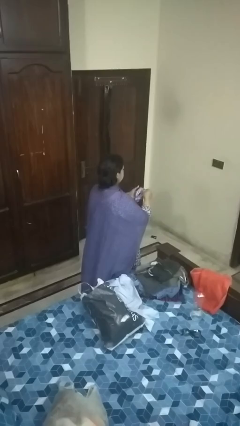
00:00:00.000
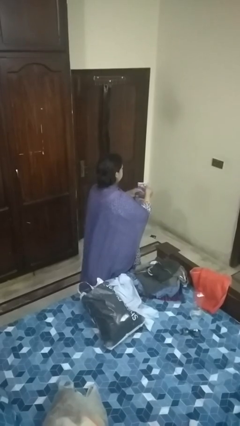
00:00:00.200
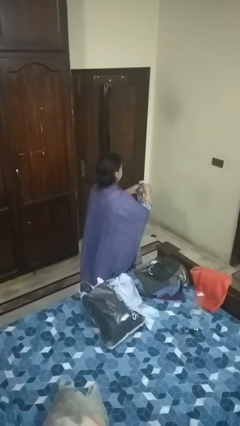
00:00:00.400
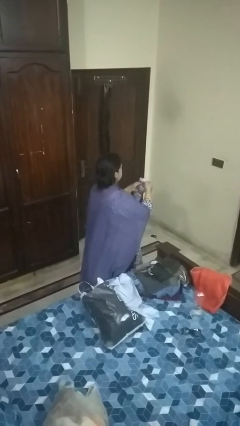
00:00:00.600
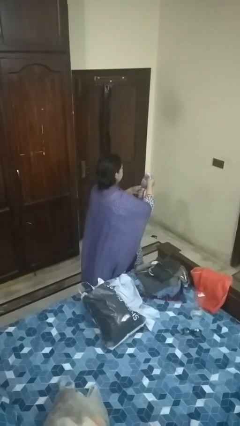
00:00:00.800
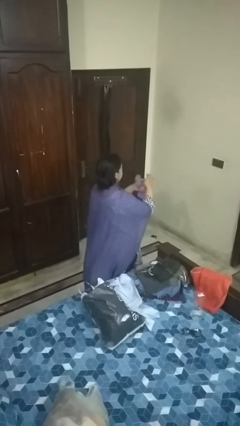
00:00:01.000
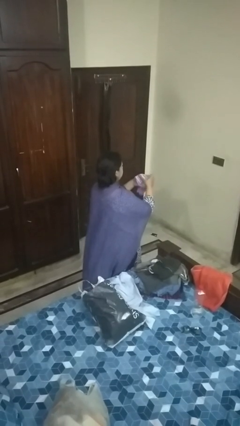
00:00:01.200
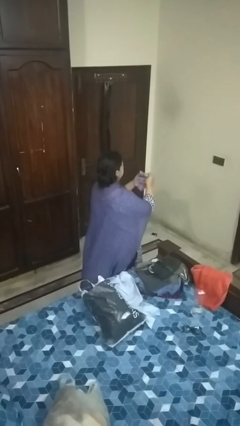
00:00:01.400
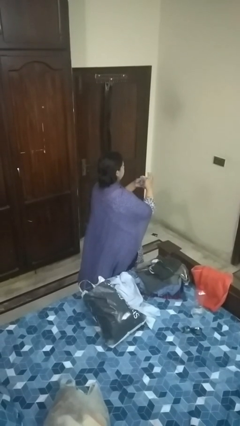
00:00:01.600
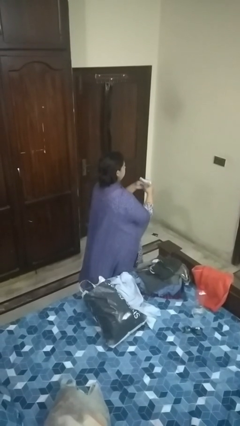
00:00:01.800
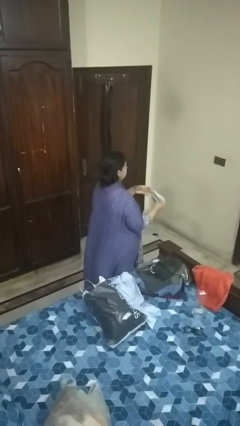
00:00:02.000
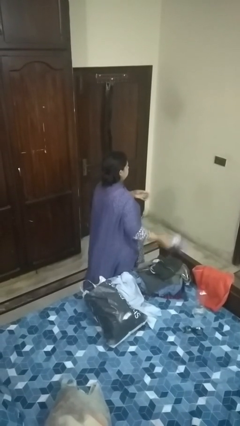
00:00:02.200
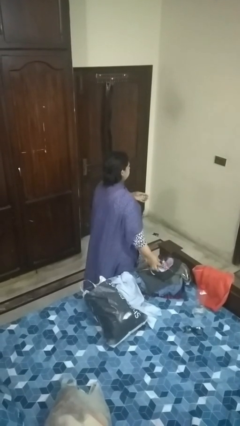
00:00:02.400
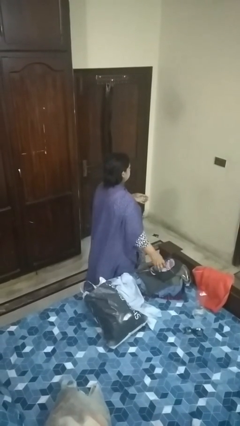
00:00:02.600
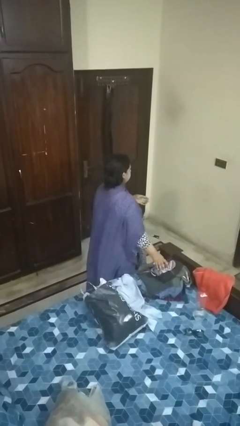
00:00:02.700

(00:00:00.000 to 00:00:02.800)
person folds socks

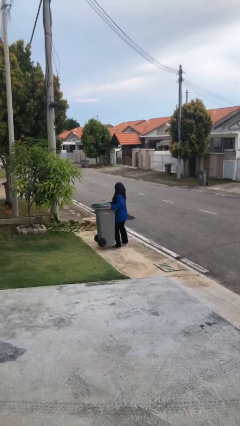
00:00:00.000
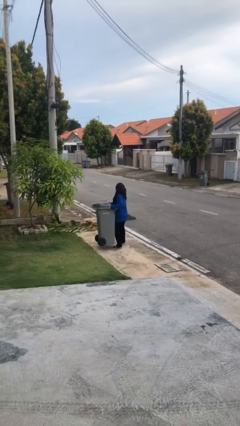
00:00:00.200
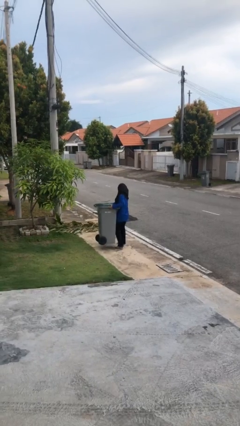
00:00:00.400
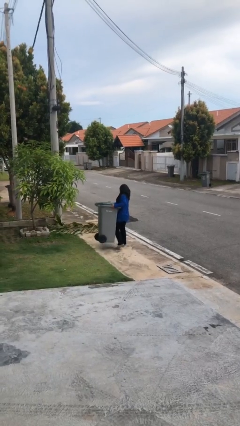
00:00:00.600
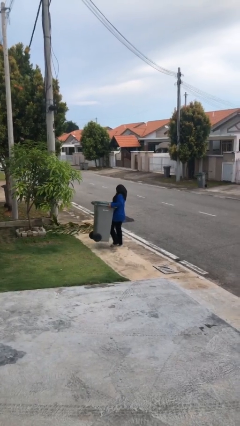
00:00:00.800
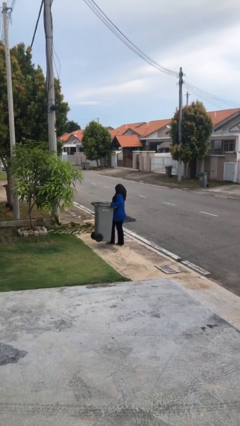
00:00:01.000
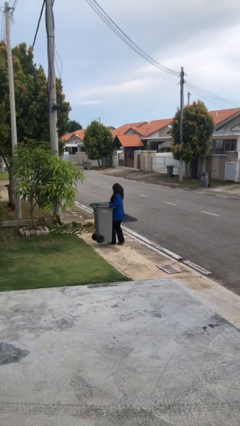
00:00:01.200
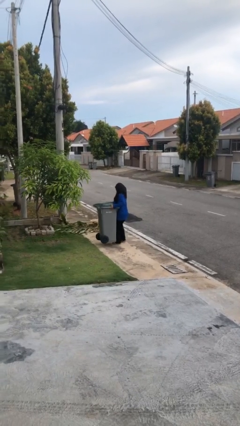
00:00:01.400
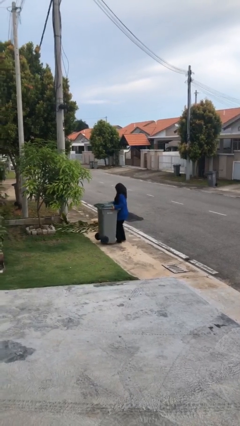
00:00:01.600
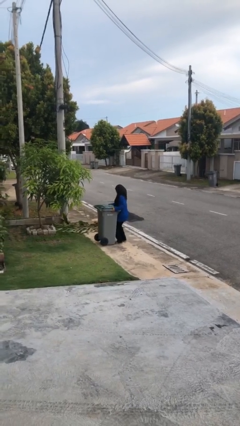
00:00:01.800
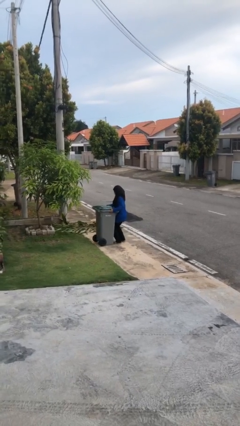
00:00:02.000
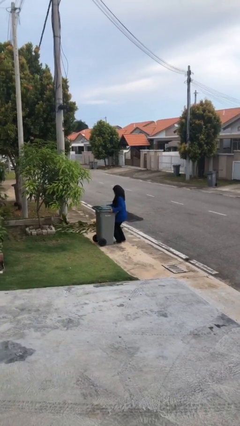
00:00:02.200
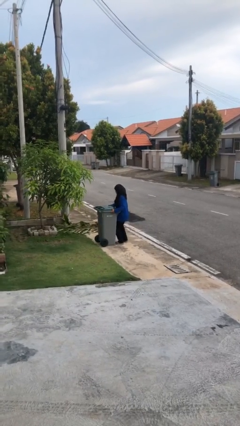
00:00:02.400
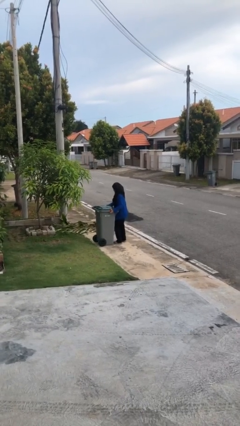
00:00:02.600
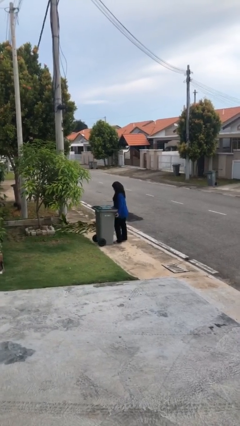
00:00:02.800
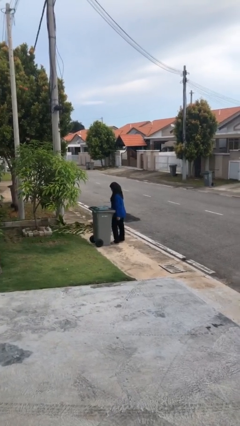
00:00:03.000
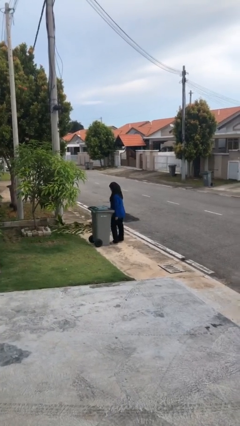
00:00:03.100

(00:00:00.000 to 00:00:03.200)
person puts down object on floor

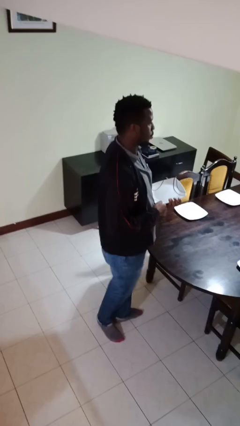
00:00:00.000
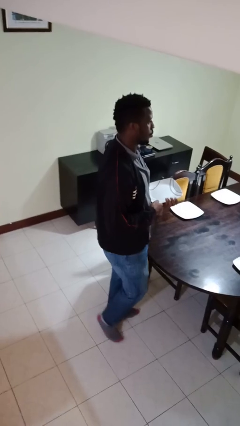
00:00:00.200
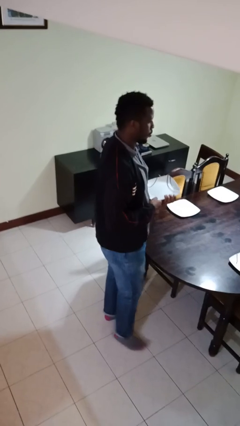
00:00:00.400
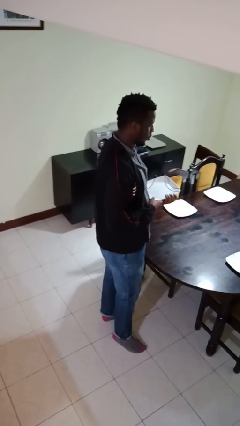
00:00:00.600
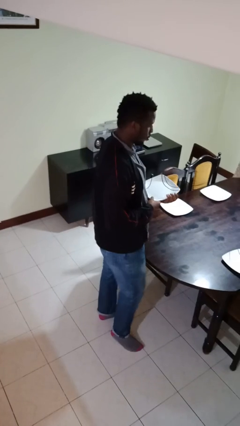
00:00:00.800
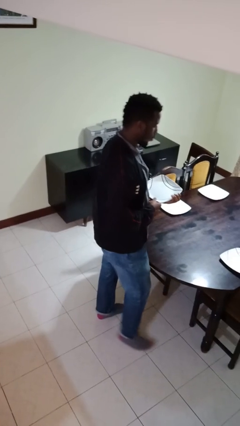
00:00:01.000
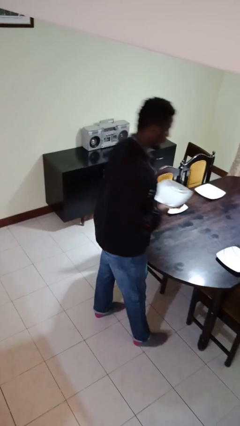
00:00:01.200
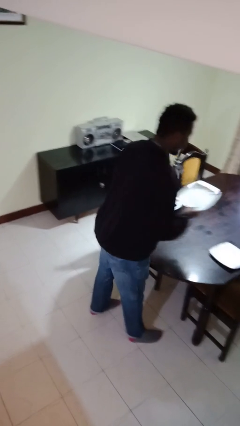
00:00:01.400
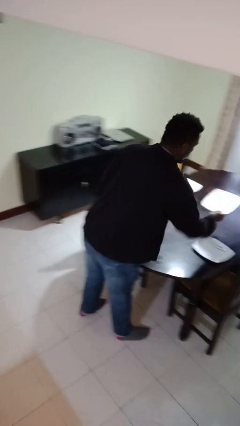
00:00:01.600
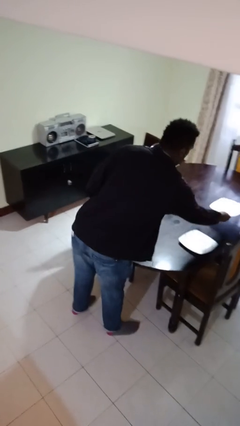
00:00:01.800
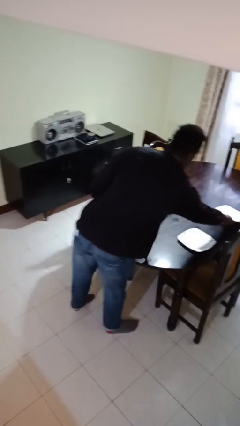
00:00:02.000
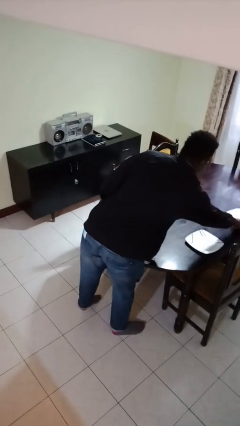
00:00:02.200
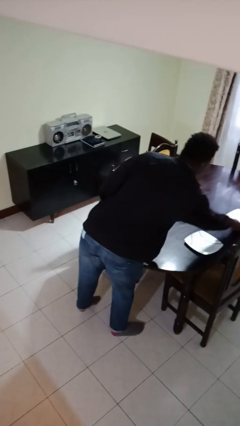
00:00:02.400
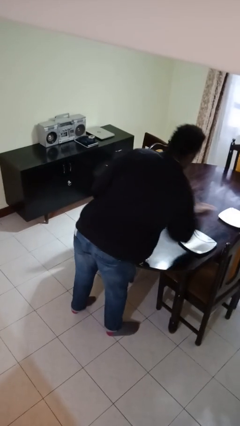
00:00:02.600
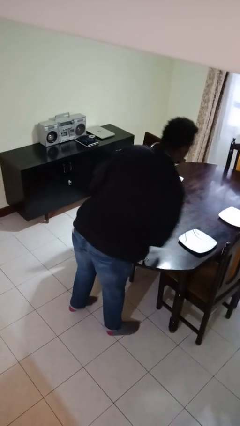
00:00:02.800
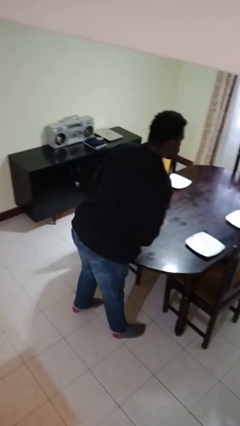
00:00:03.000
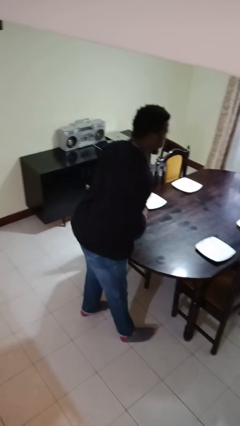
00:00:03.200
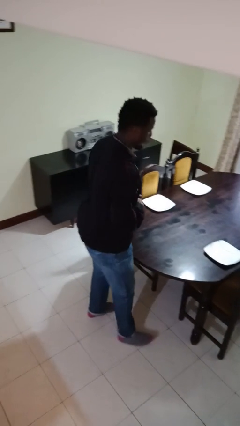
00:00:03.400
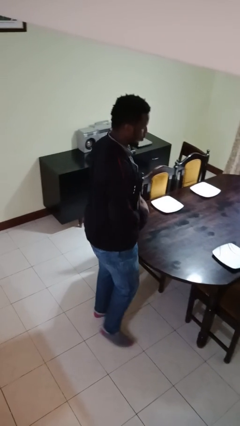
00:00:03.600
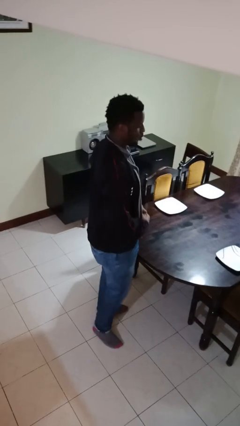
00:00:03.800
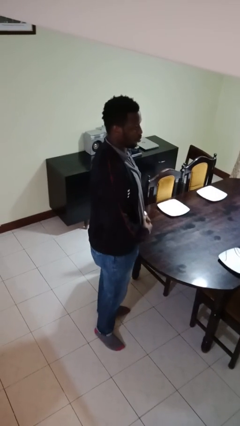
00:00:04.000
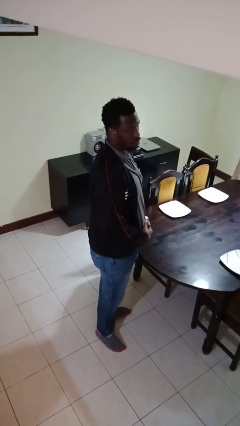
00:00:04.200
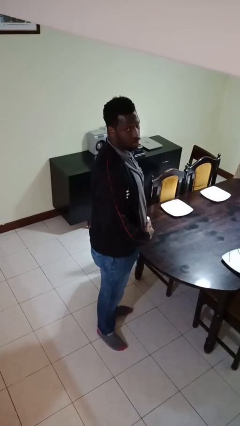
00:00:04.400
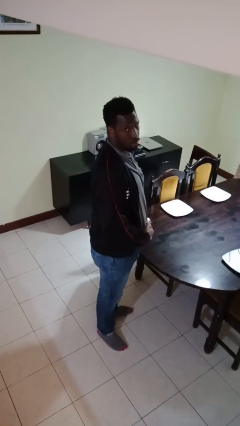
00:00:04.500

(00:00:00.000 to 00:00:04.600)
person sets table

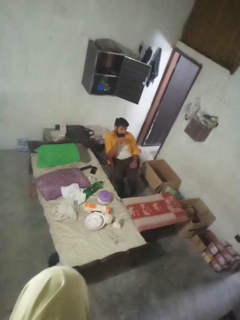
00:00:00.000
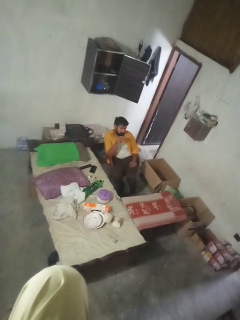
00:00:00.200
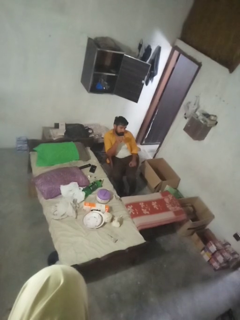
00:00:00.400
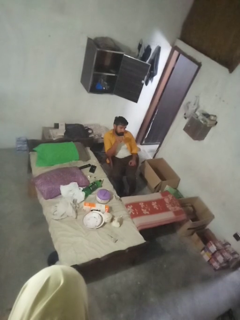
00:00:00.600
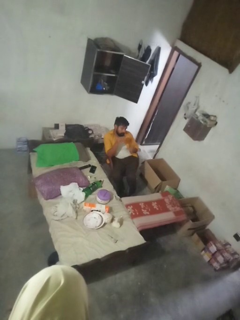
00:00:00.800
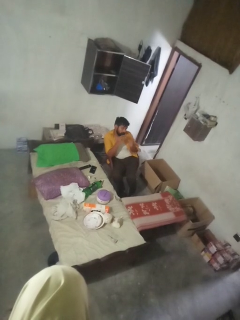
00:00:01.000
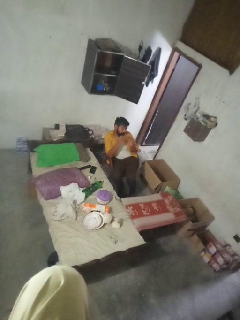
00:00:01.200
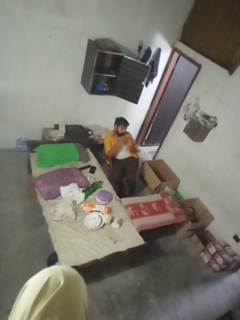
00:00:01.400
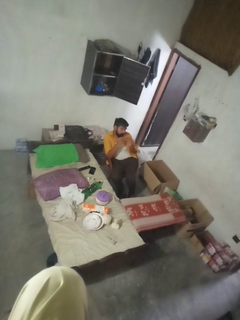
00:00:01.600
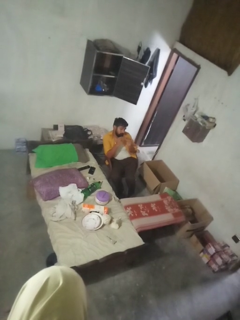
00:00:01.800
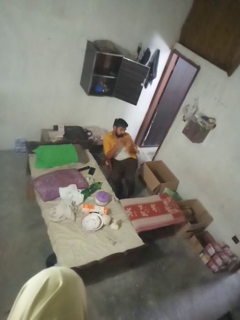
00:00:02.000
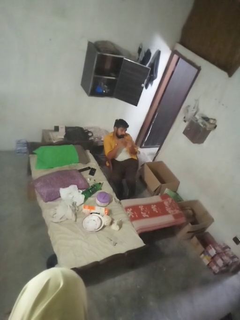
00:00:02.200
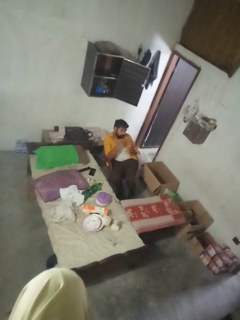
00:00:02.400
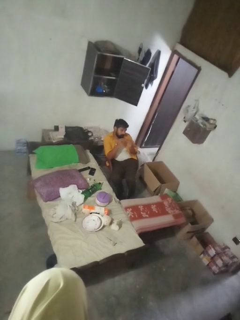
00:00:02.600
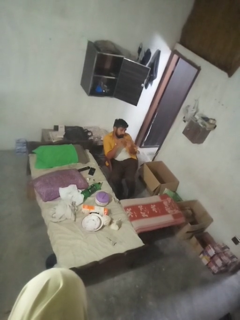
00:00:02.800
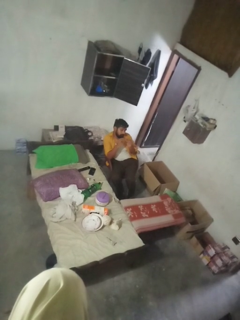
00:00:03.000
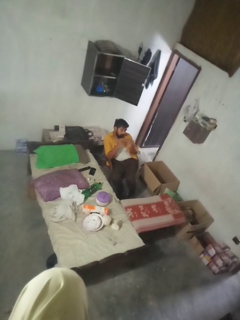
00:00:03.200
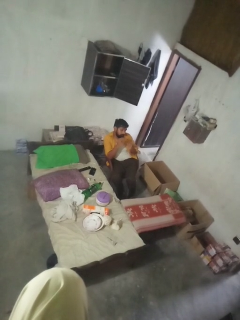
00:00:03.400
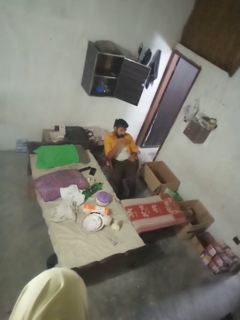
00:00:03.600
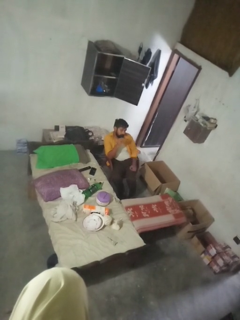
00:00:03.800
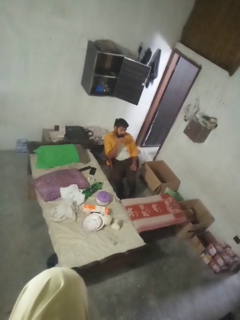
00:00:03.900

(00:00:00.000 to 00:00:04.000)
person clips fingernails

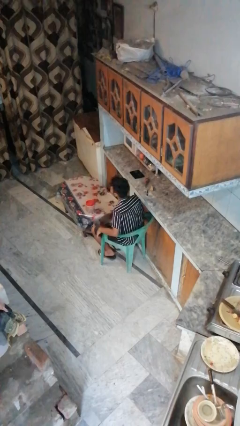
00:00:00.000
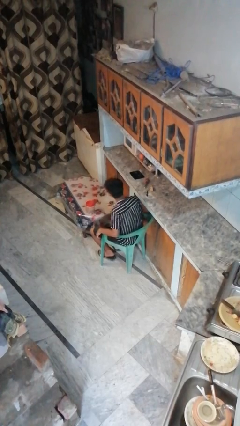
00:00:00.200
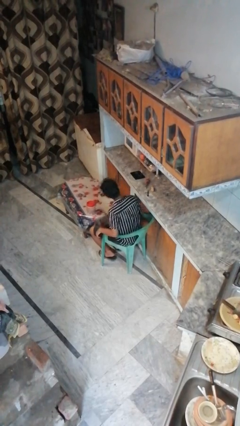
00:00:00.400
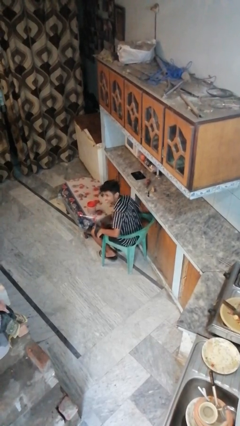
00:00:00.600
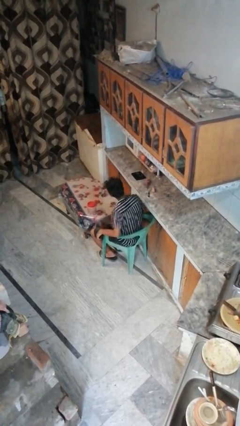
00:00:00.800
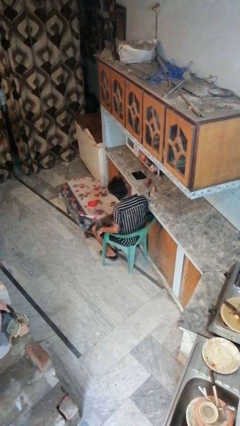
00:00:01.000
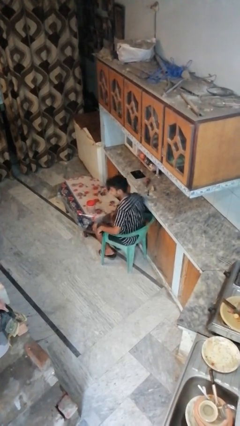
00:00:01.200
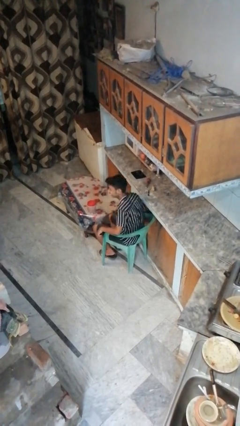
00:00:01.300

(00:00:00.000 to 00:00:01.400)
person shakes head

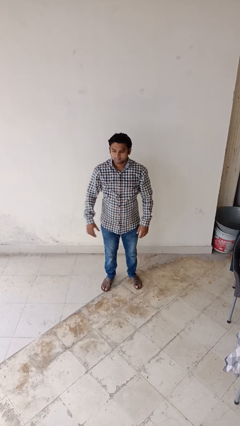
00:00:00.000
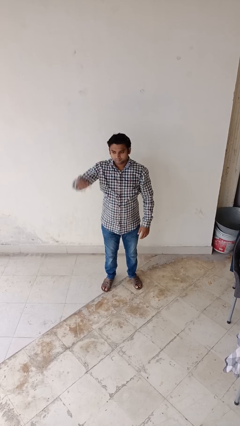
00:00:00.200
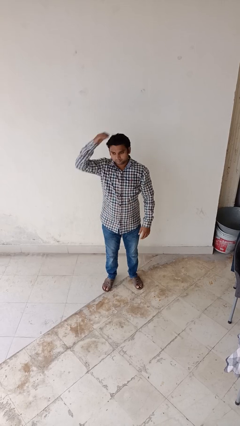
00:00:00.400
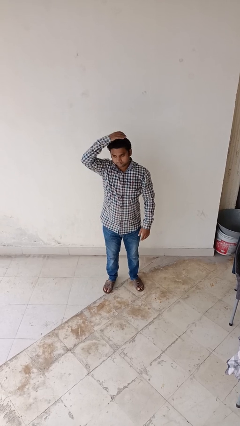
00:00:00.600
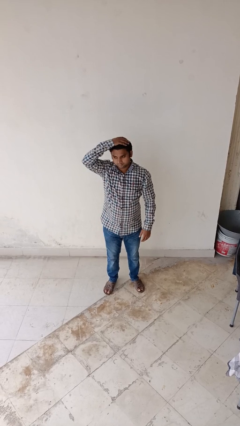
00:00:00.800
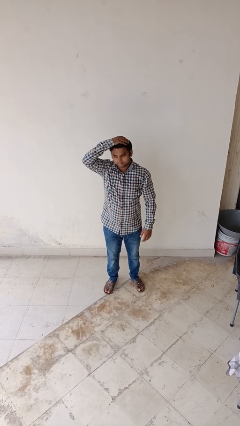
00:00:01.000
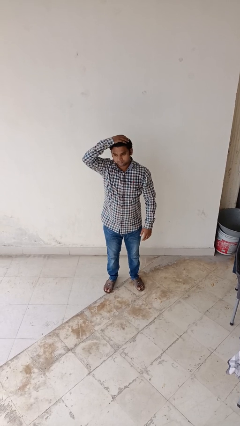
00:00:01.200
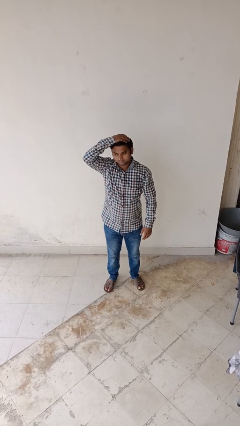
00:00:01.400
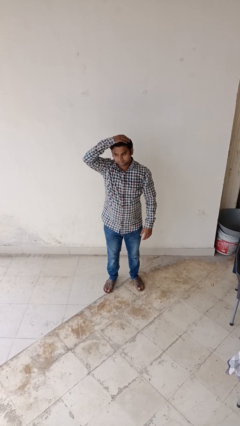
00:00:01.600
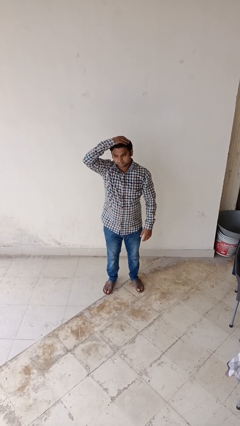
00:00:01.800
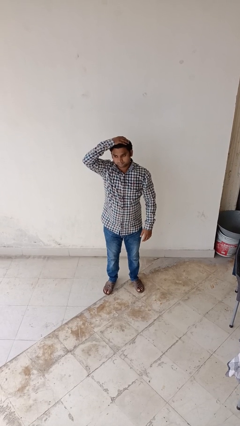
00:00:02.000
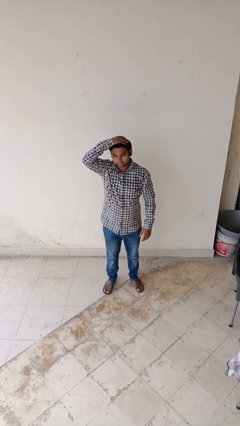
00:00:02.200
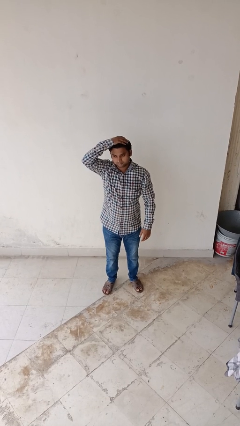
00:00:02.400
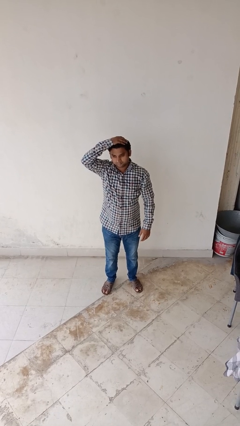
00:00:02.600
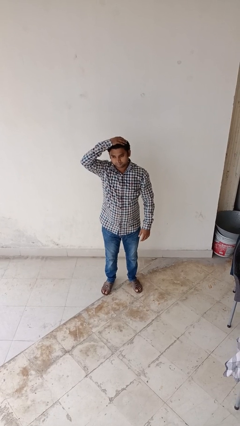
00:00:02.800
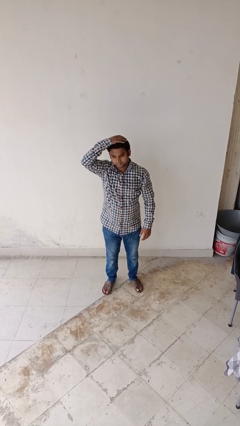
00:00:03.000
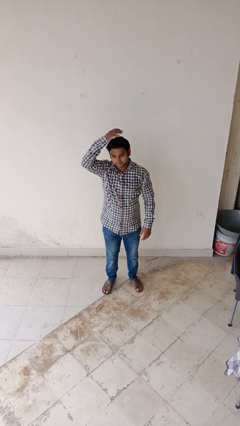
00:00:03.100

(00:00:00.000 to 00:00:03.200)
person pats head
